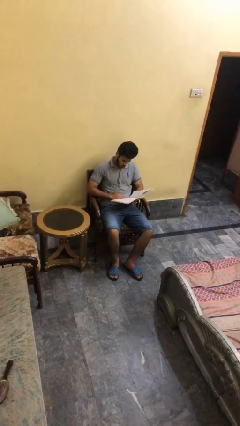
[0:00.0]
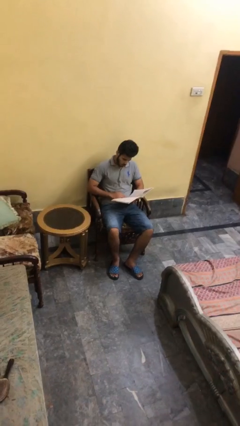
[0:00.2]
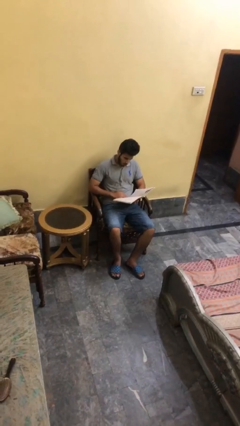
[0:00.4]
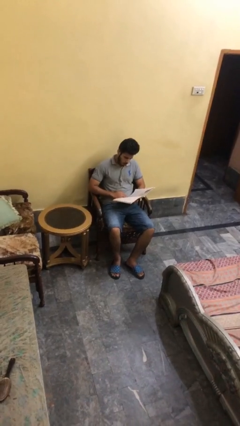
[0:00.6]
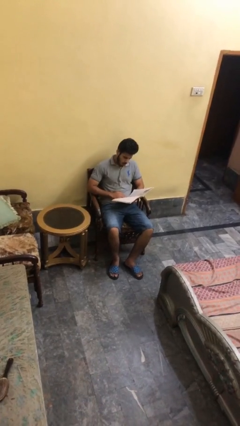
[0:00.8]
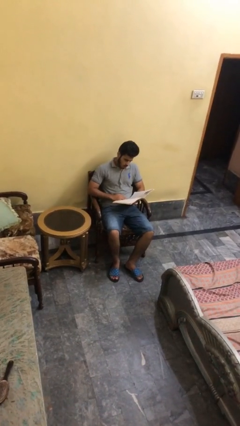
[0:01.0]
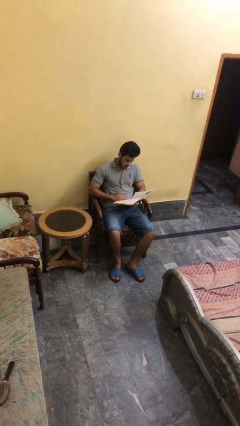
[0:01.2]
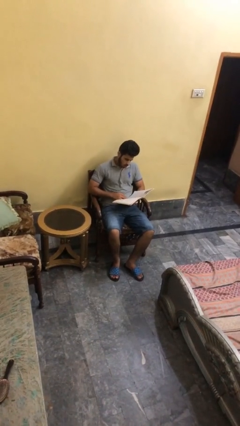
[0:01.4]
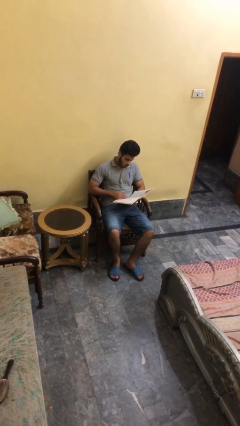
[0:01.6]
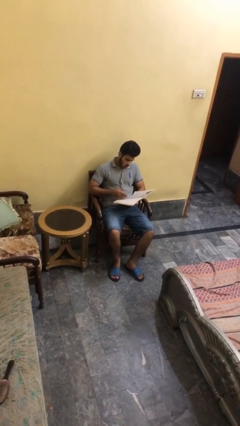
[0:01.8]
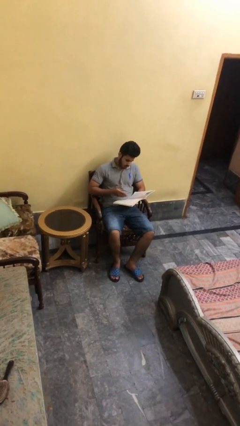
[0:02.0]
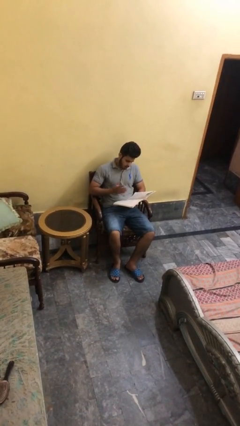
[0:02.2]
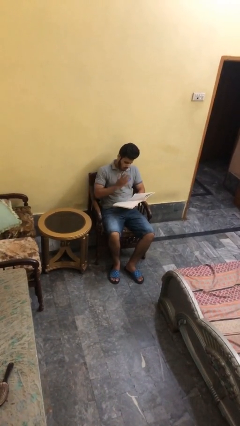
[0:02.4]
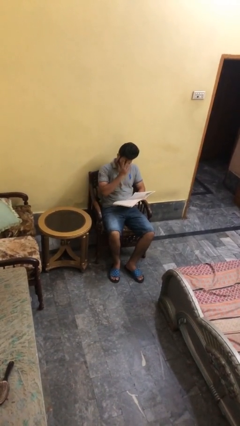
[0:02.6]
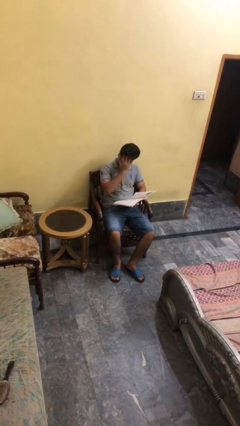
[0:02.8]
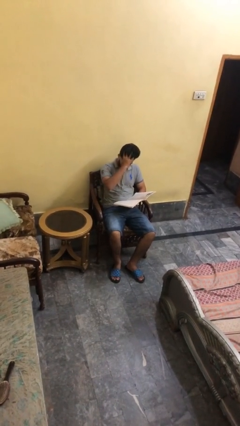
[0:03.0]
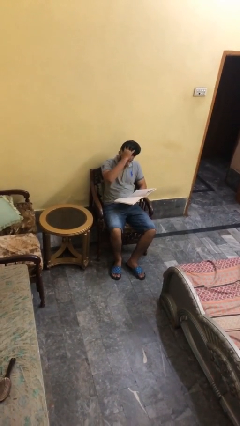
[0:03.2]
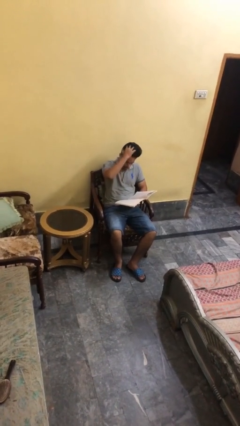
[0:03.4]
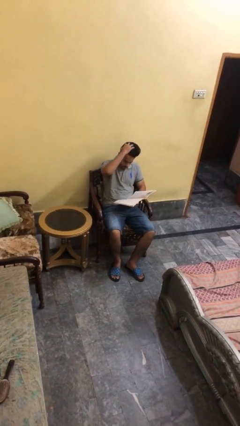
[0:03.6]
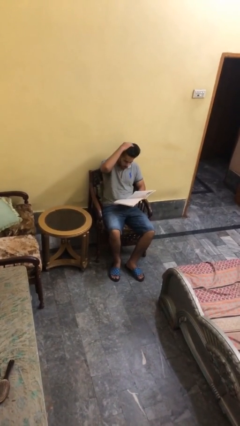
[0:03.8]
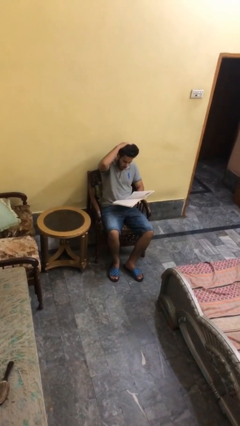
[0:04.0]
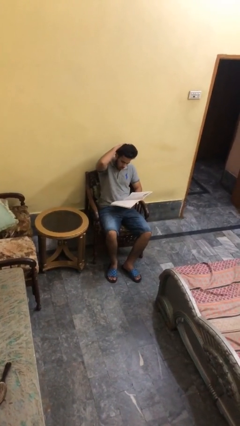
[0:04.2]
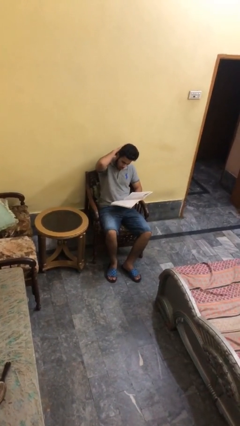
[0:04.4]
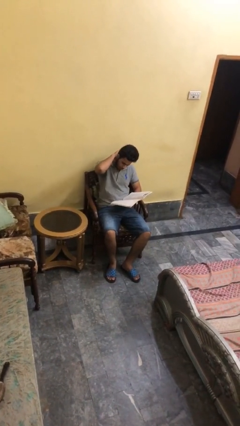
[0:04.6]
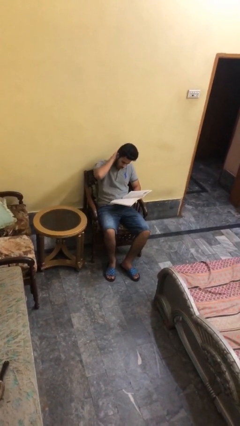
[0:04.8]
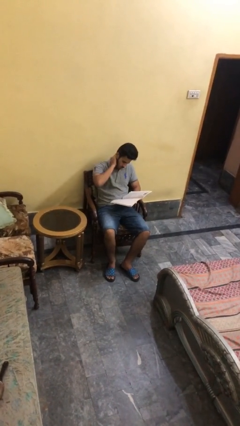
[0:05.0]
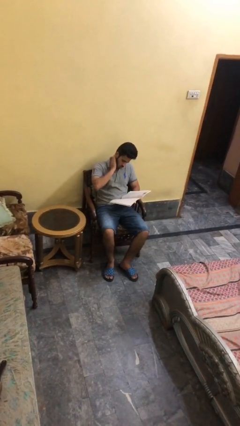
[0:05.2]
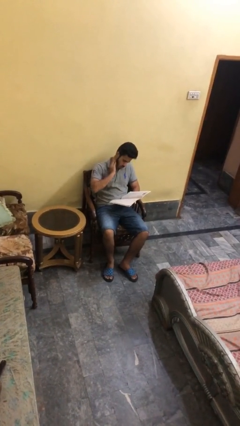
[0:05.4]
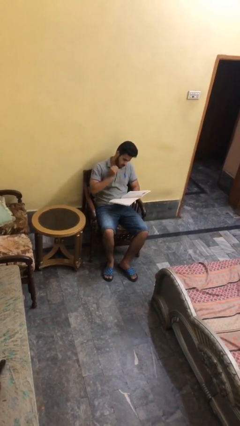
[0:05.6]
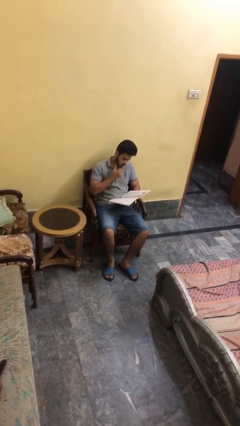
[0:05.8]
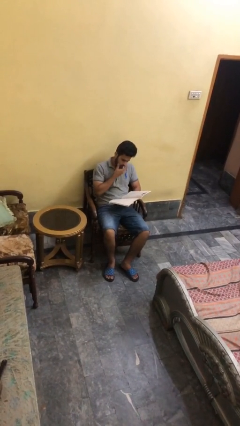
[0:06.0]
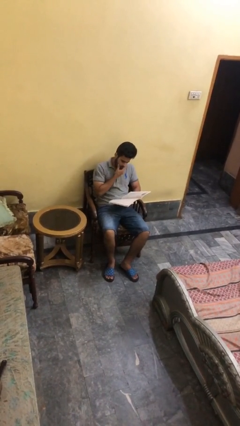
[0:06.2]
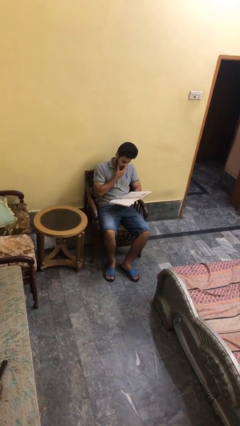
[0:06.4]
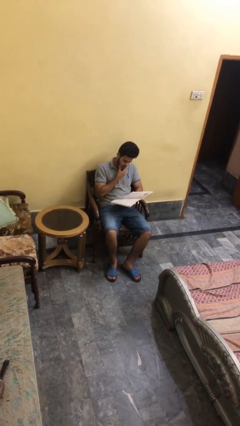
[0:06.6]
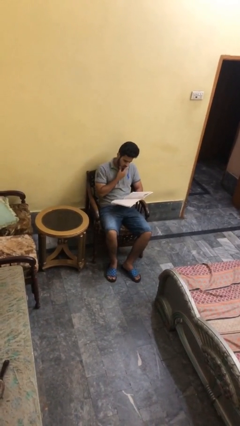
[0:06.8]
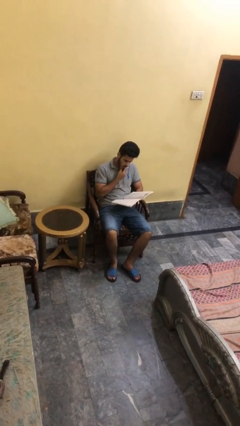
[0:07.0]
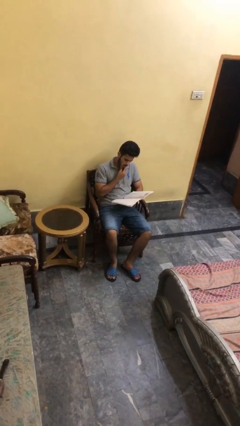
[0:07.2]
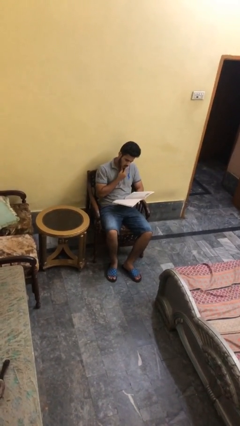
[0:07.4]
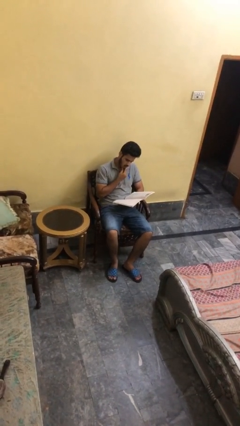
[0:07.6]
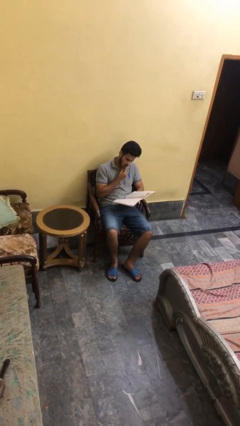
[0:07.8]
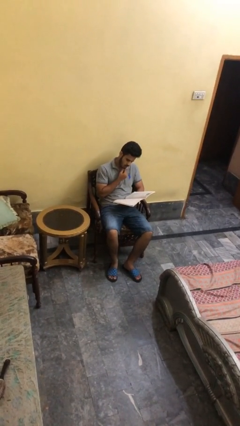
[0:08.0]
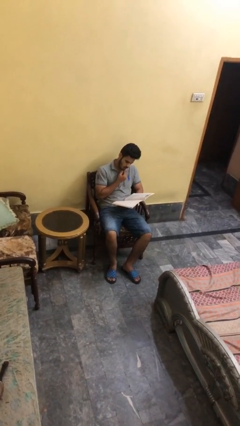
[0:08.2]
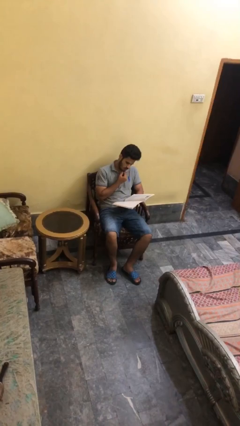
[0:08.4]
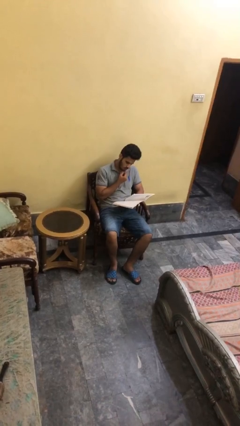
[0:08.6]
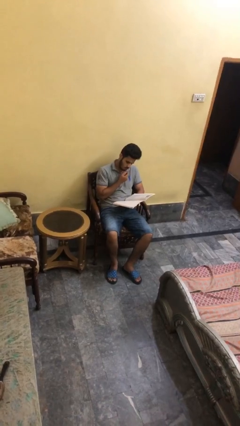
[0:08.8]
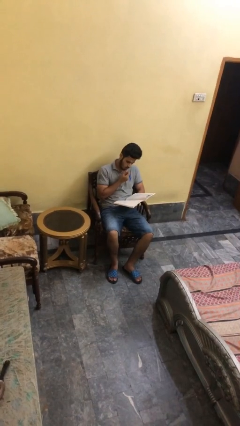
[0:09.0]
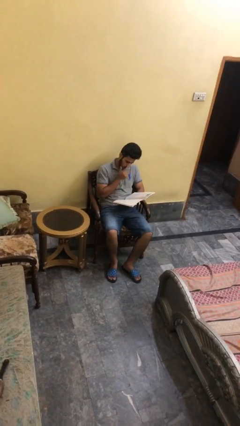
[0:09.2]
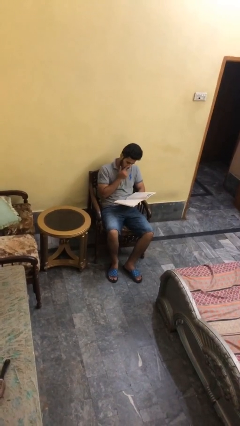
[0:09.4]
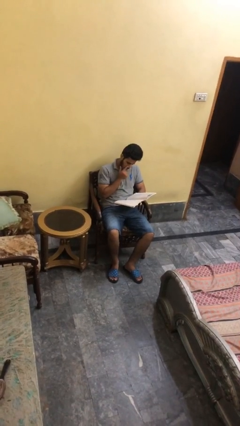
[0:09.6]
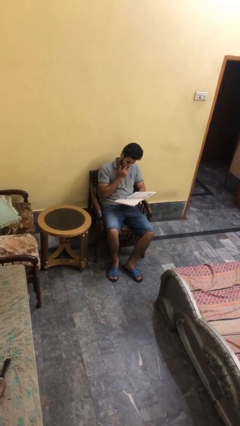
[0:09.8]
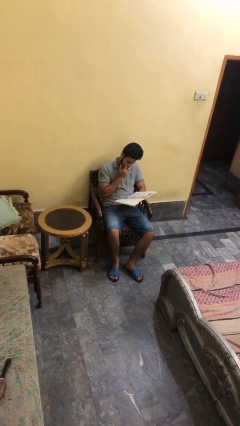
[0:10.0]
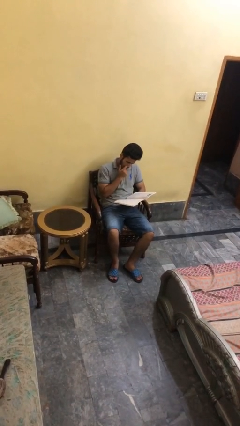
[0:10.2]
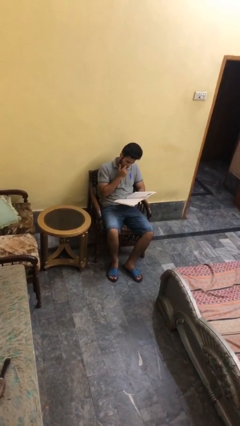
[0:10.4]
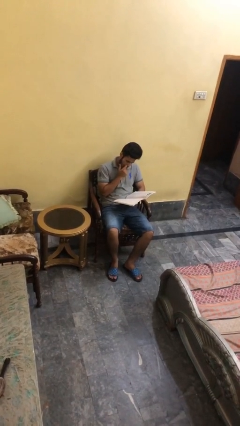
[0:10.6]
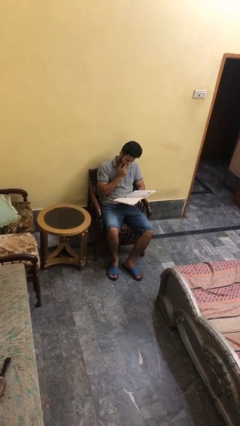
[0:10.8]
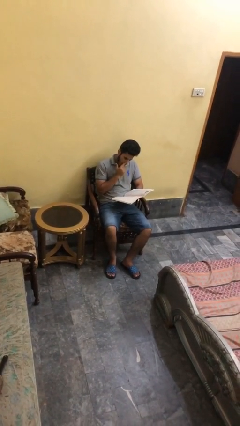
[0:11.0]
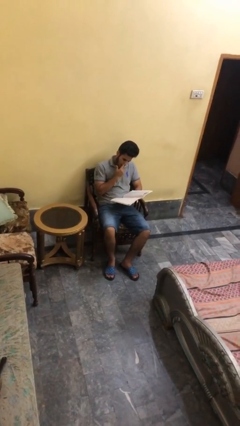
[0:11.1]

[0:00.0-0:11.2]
person reads document

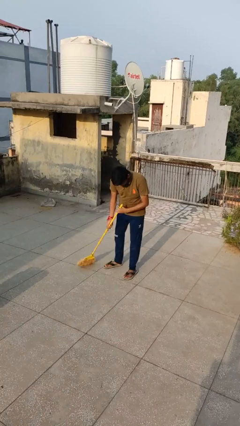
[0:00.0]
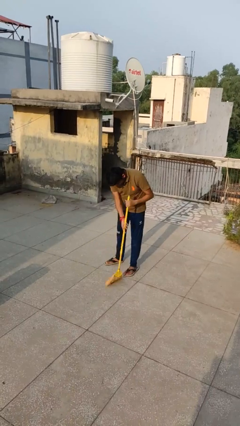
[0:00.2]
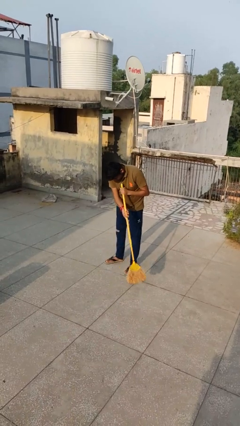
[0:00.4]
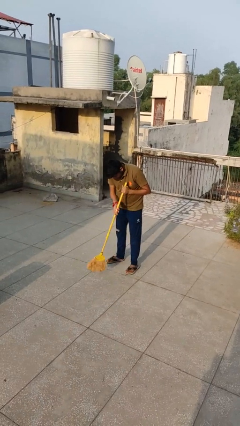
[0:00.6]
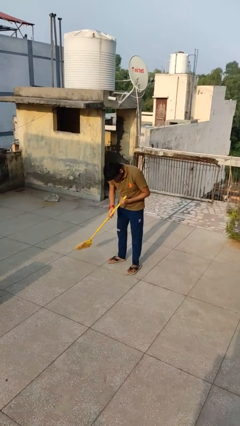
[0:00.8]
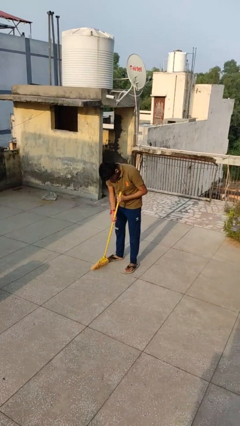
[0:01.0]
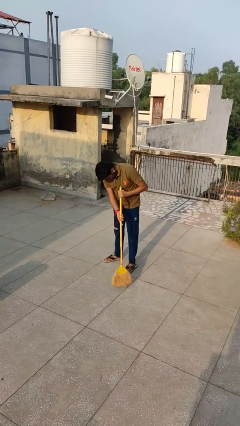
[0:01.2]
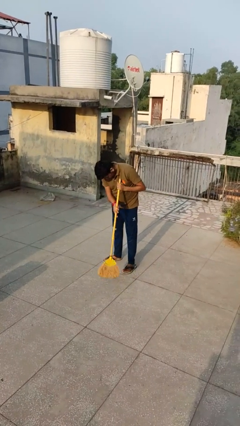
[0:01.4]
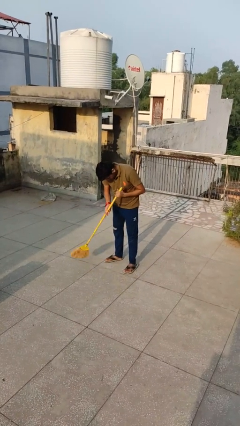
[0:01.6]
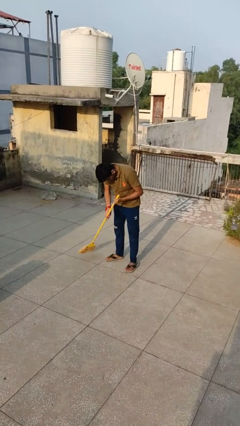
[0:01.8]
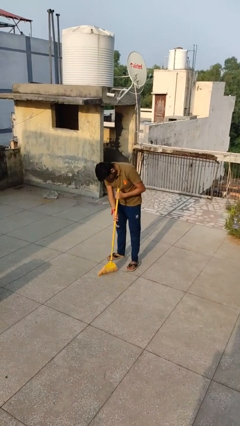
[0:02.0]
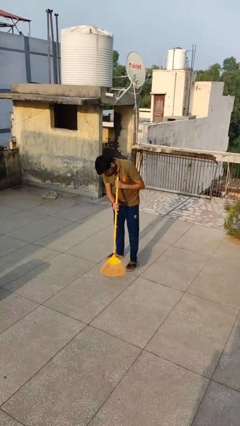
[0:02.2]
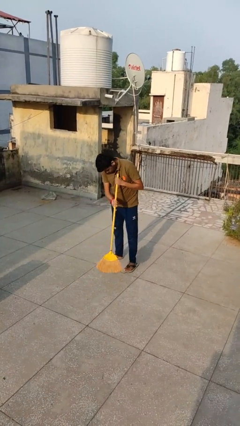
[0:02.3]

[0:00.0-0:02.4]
person sweeps floor

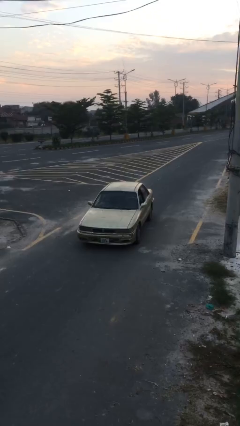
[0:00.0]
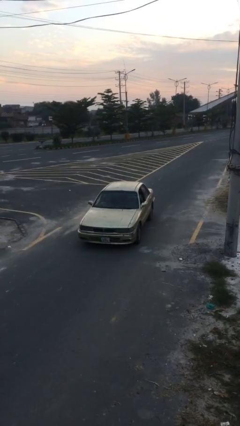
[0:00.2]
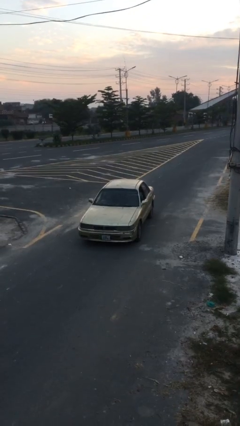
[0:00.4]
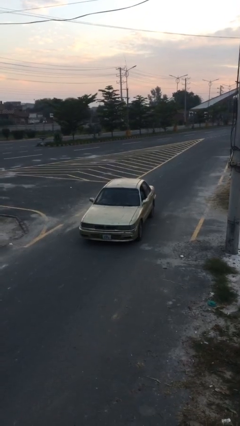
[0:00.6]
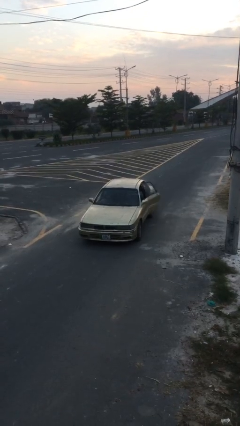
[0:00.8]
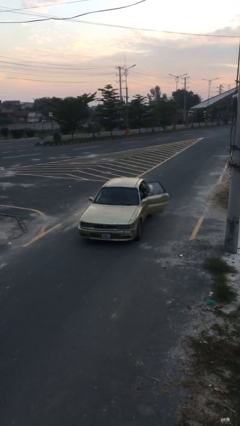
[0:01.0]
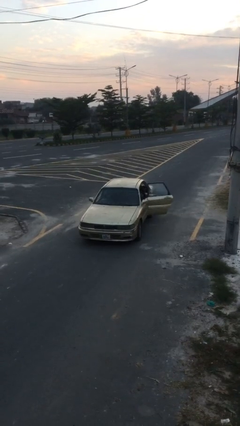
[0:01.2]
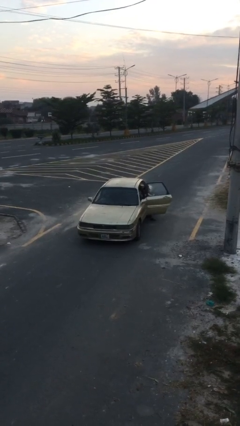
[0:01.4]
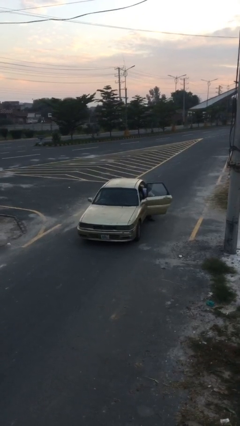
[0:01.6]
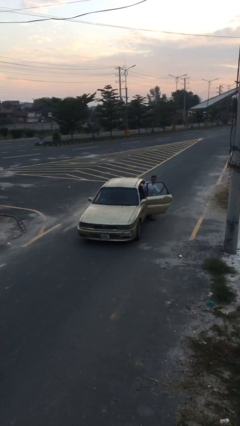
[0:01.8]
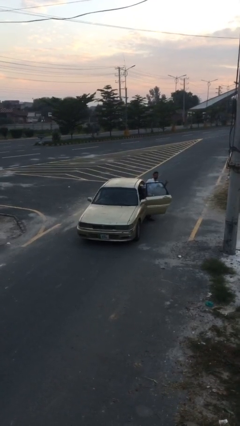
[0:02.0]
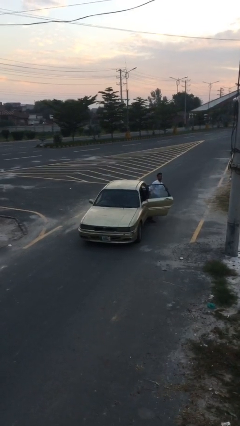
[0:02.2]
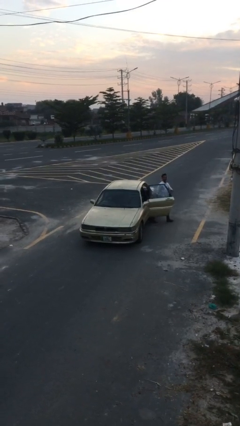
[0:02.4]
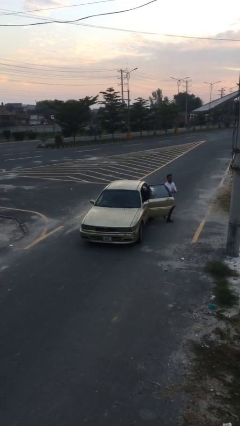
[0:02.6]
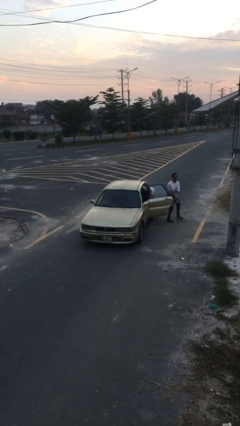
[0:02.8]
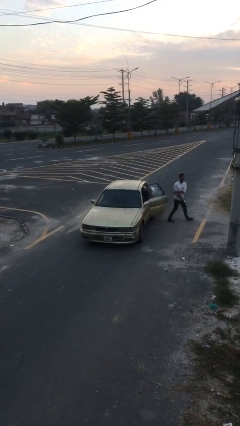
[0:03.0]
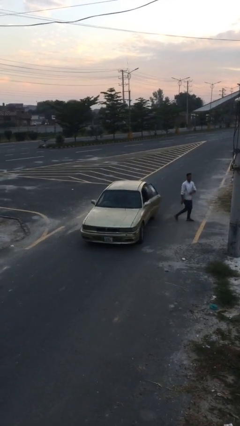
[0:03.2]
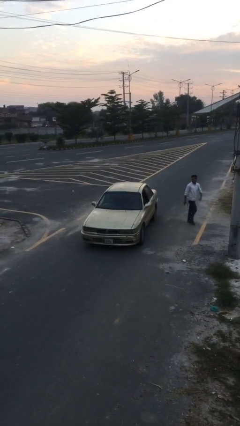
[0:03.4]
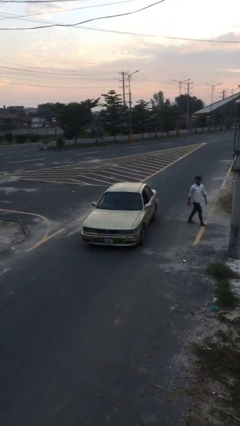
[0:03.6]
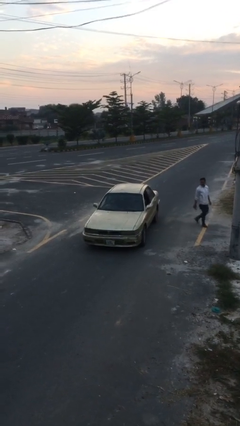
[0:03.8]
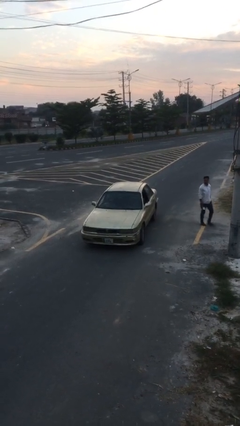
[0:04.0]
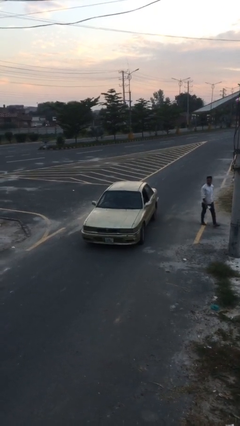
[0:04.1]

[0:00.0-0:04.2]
car drops off person
